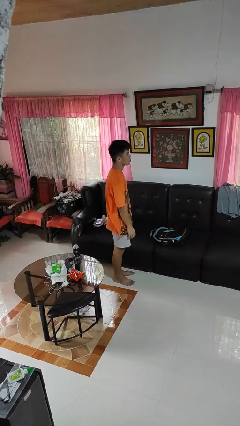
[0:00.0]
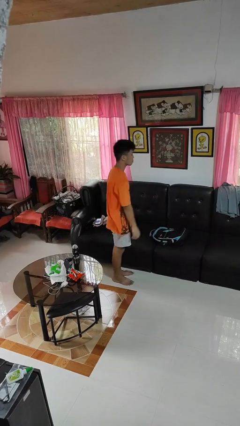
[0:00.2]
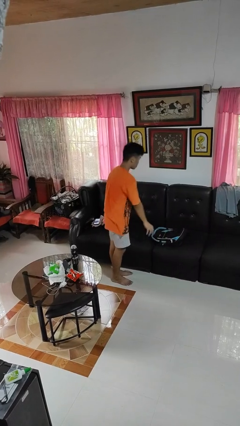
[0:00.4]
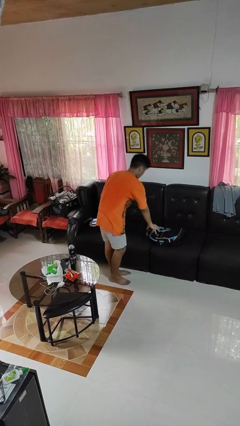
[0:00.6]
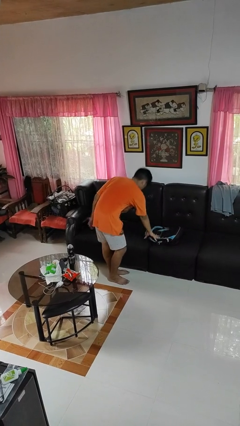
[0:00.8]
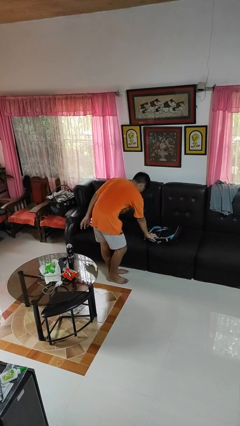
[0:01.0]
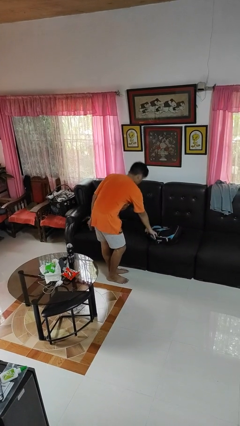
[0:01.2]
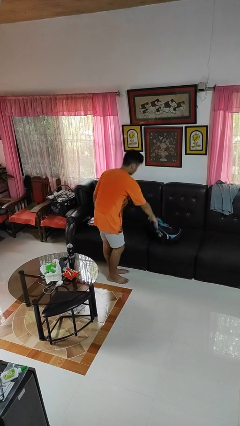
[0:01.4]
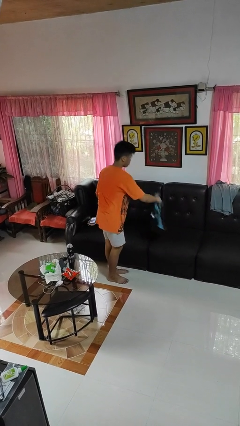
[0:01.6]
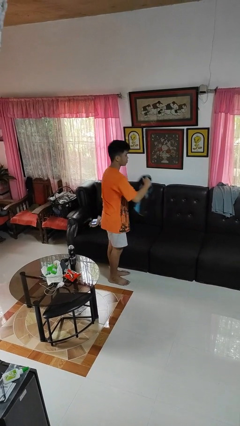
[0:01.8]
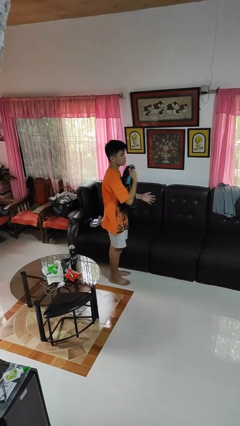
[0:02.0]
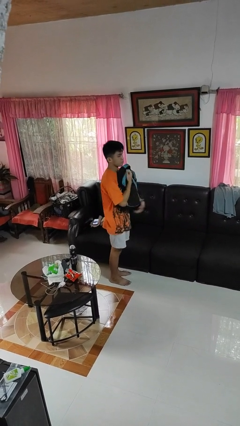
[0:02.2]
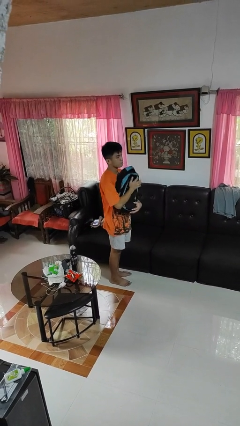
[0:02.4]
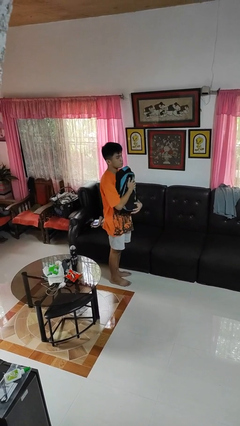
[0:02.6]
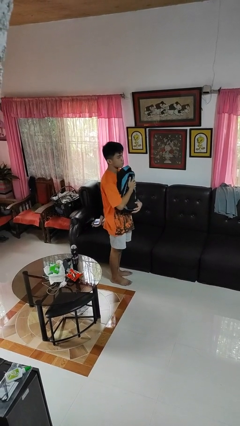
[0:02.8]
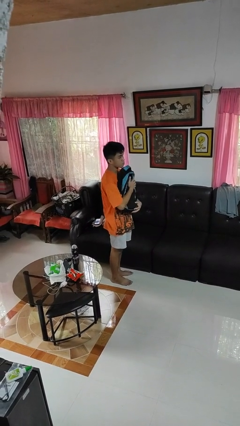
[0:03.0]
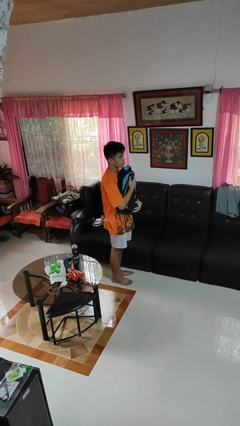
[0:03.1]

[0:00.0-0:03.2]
person picks up object from couch

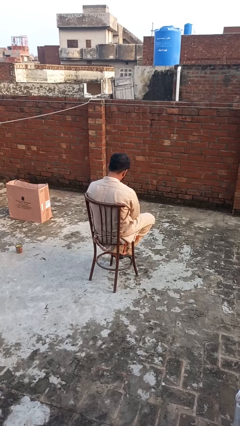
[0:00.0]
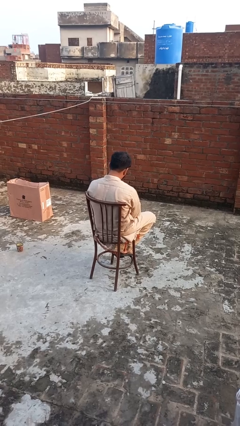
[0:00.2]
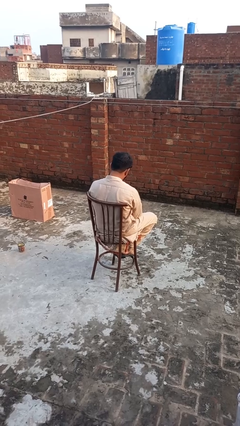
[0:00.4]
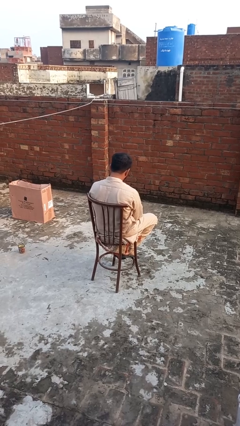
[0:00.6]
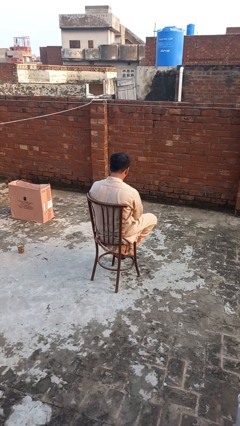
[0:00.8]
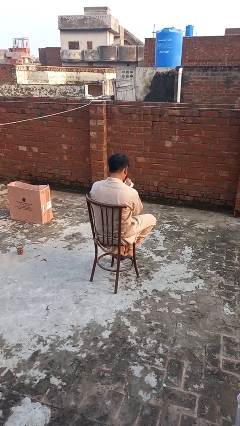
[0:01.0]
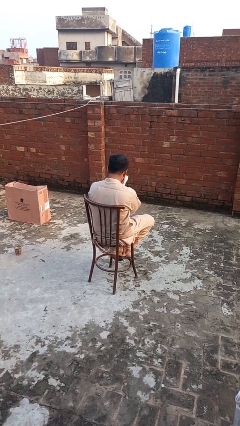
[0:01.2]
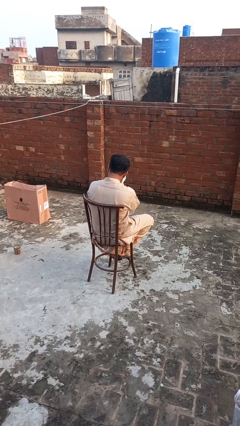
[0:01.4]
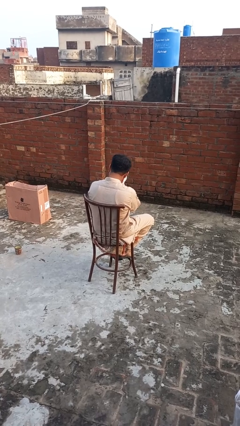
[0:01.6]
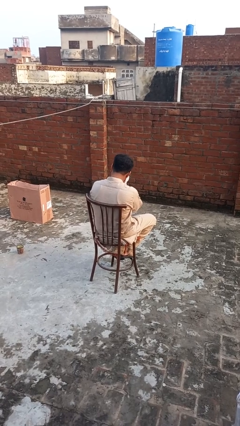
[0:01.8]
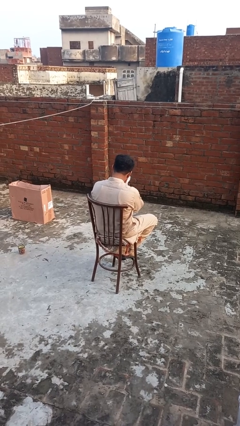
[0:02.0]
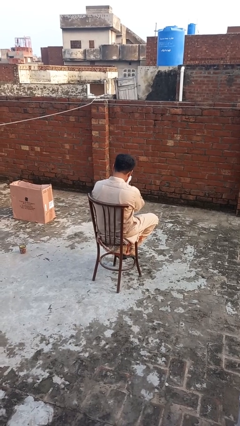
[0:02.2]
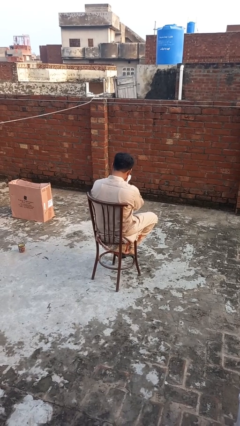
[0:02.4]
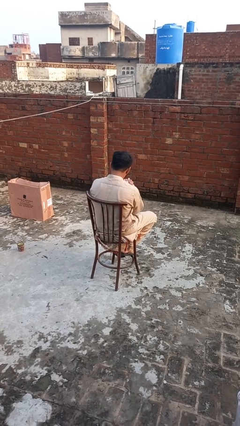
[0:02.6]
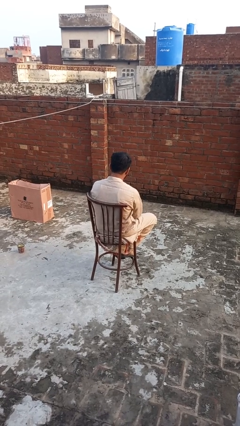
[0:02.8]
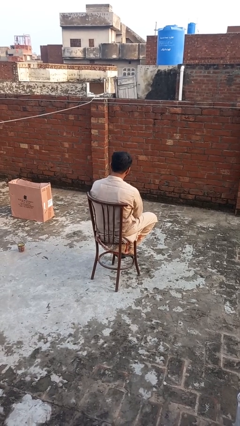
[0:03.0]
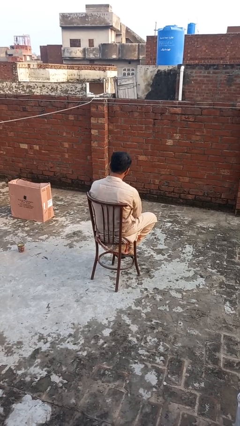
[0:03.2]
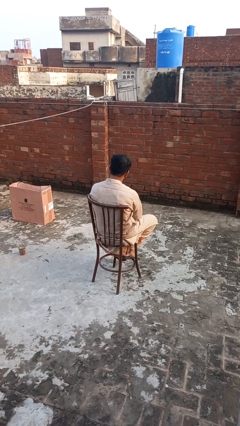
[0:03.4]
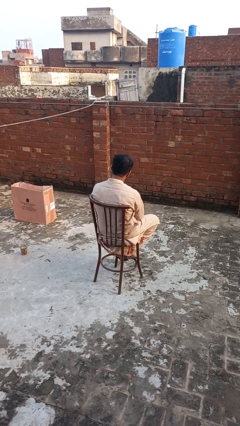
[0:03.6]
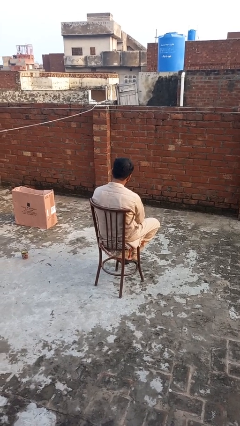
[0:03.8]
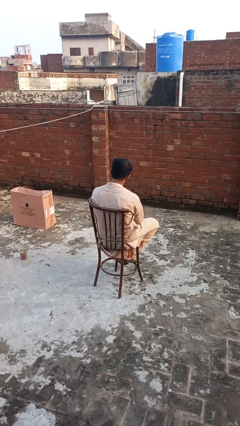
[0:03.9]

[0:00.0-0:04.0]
person blows nose

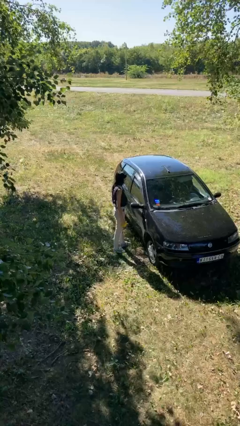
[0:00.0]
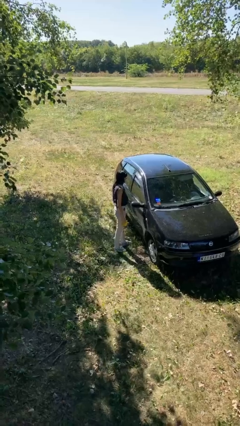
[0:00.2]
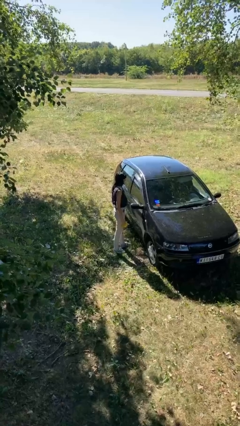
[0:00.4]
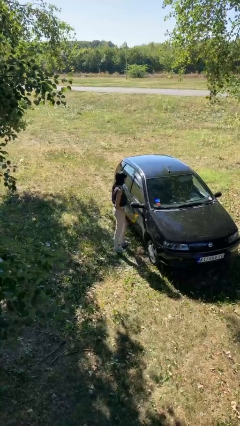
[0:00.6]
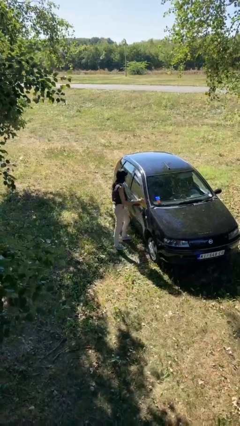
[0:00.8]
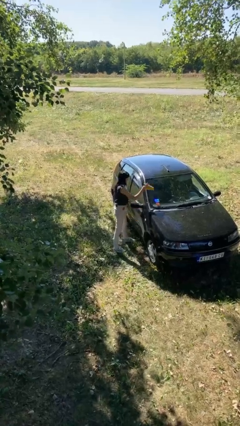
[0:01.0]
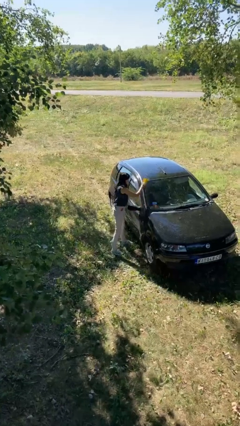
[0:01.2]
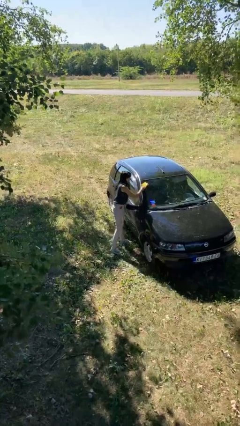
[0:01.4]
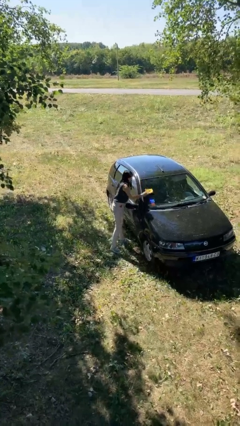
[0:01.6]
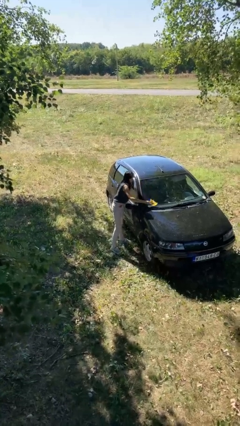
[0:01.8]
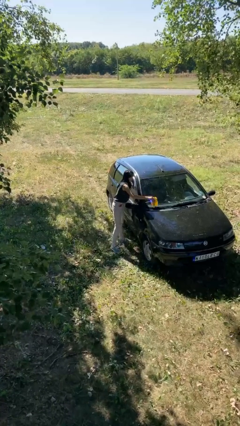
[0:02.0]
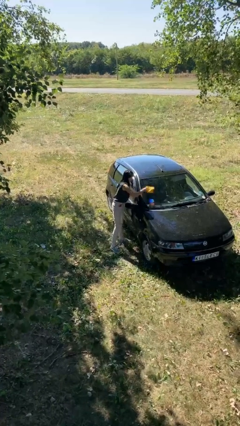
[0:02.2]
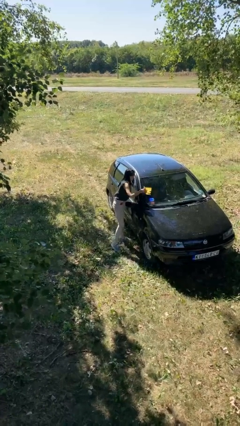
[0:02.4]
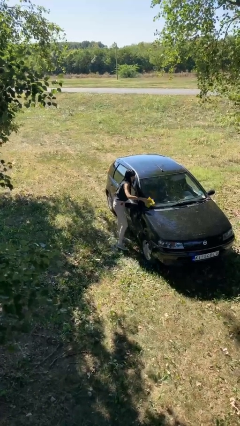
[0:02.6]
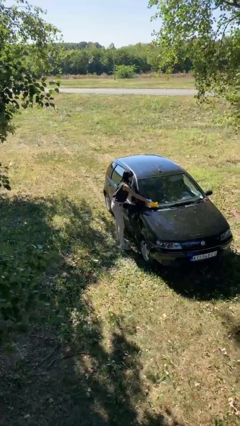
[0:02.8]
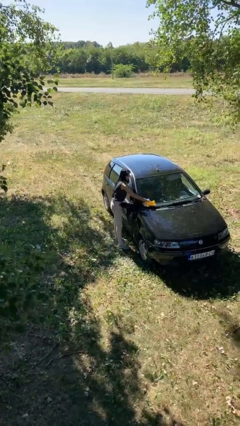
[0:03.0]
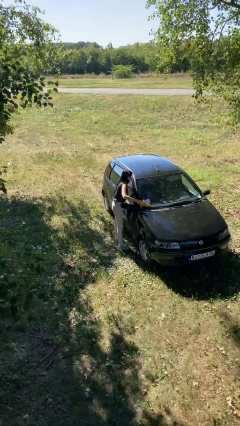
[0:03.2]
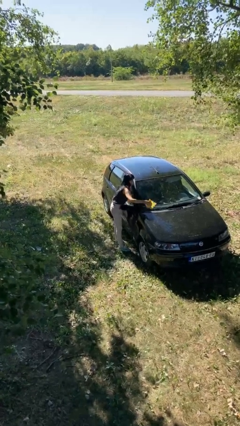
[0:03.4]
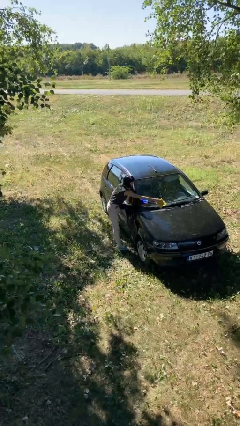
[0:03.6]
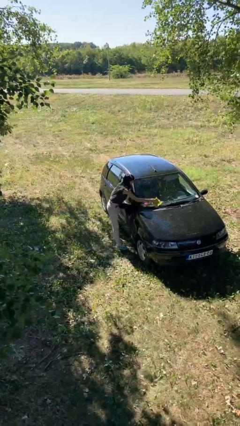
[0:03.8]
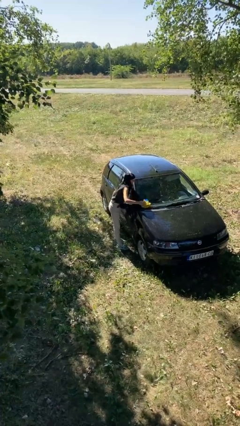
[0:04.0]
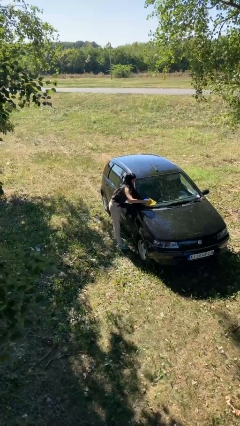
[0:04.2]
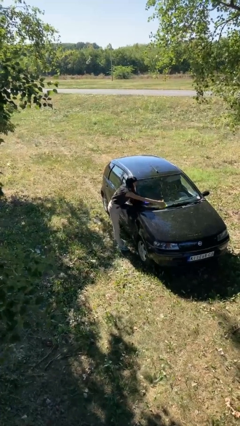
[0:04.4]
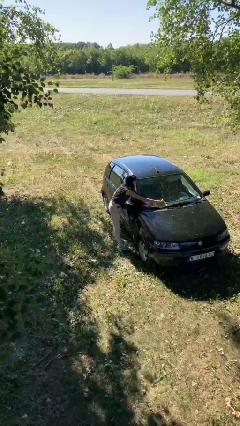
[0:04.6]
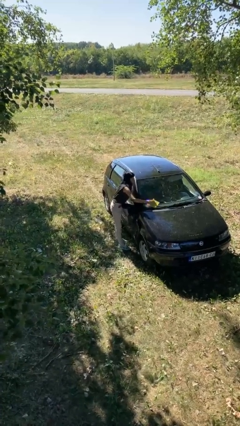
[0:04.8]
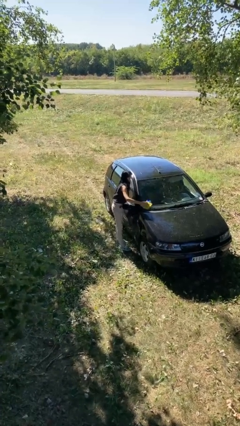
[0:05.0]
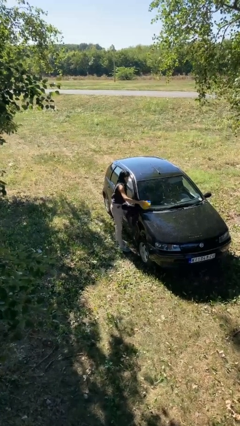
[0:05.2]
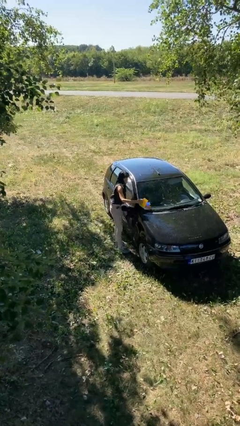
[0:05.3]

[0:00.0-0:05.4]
person polishes car with rag

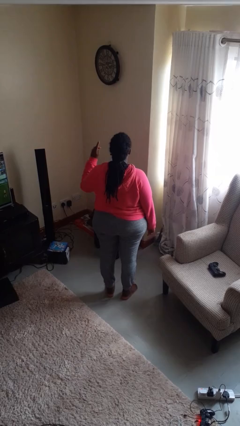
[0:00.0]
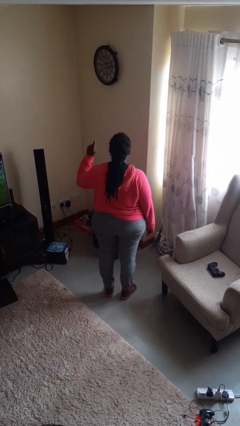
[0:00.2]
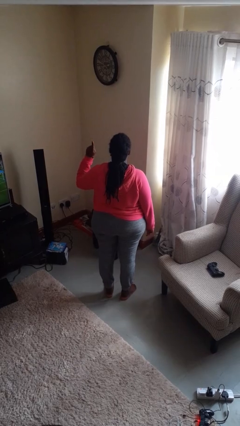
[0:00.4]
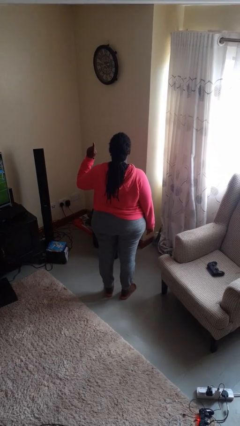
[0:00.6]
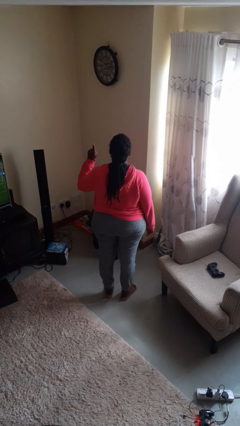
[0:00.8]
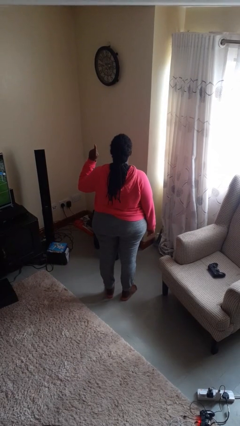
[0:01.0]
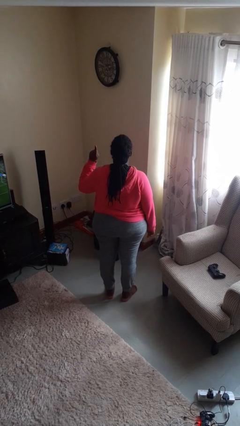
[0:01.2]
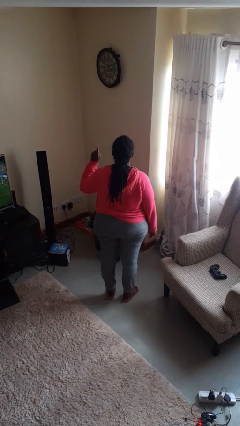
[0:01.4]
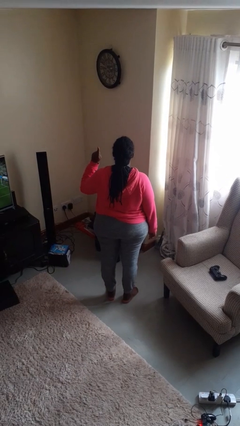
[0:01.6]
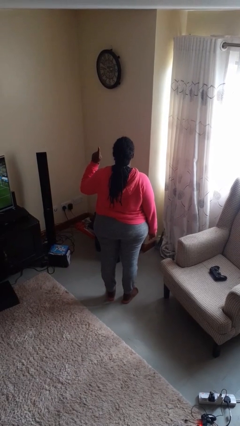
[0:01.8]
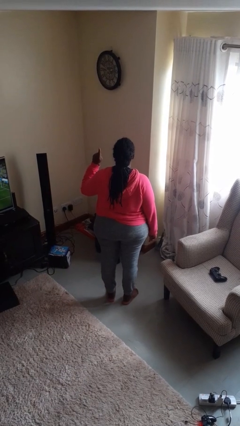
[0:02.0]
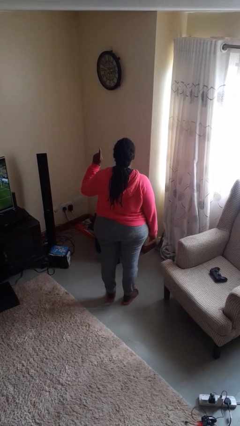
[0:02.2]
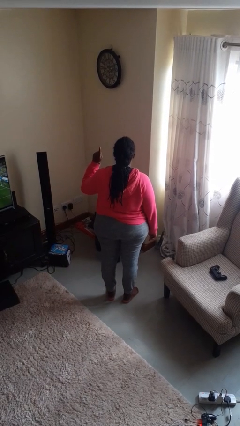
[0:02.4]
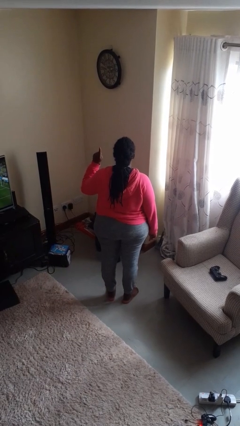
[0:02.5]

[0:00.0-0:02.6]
person gestures number one

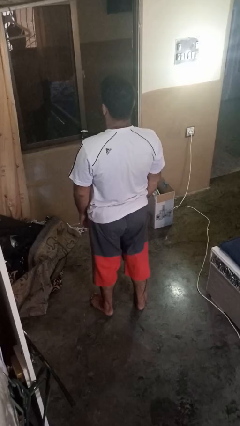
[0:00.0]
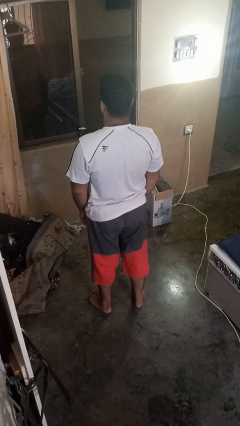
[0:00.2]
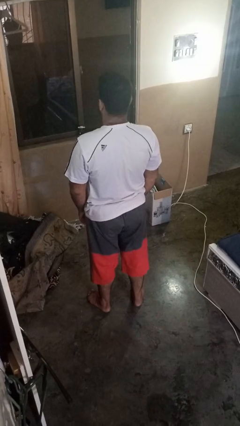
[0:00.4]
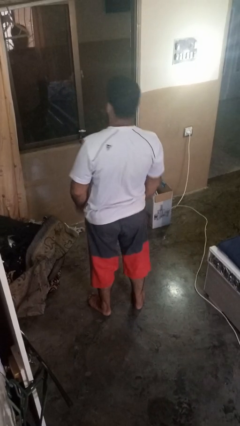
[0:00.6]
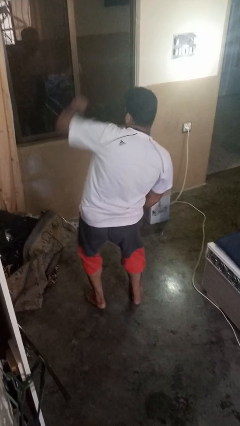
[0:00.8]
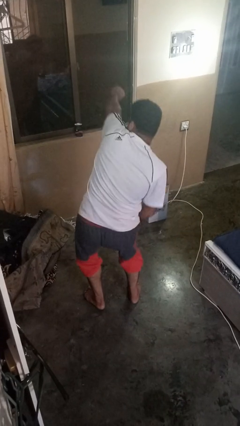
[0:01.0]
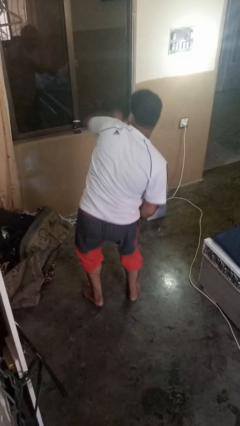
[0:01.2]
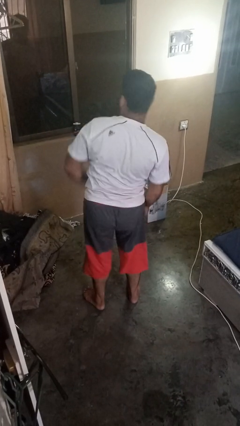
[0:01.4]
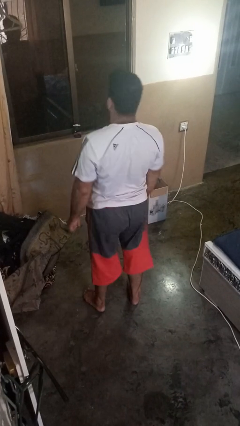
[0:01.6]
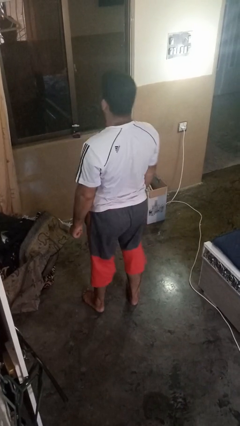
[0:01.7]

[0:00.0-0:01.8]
person karate chop

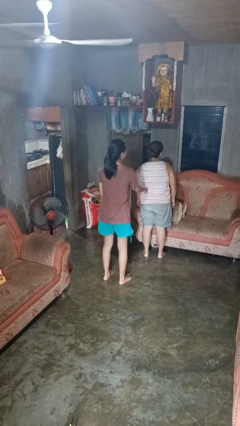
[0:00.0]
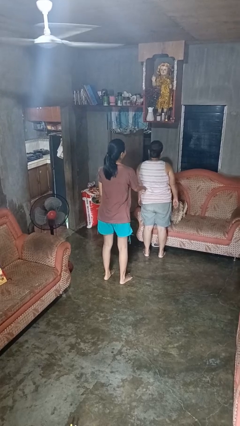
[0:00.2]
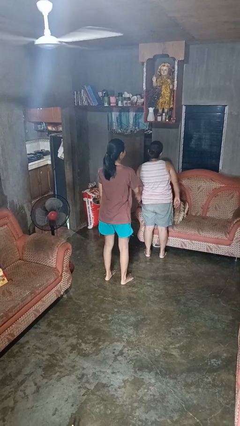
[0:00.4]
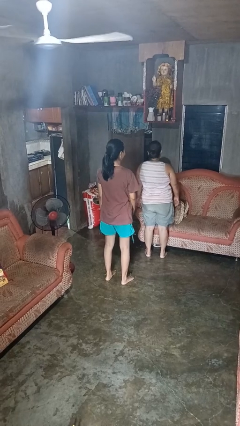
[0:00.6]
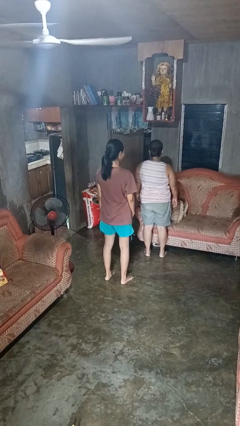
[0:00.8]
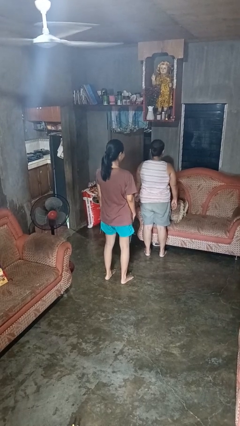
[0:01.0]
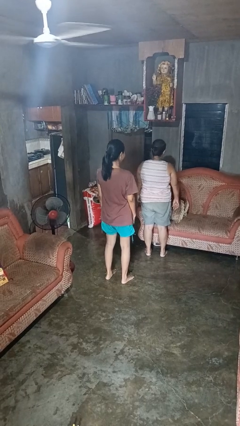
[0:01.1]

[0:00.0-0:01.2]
person tickles person
